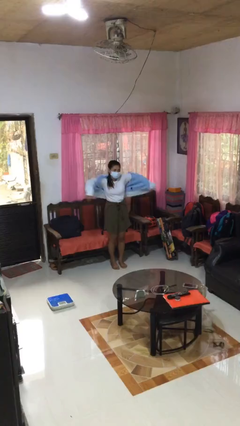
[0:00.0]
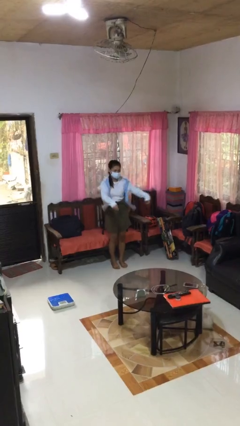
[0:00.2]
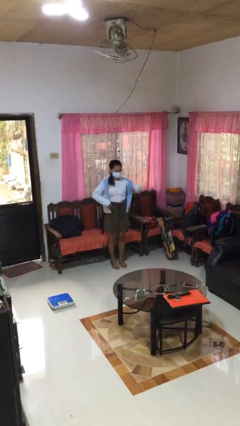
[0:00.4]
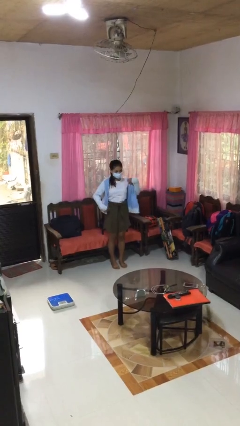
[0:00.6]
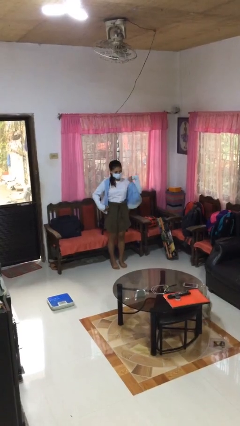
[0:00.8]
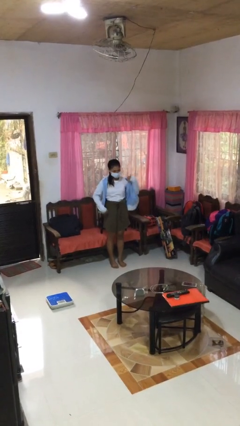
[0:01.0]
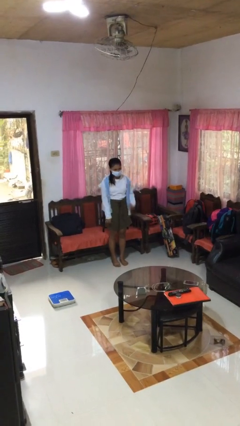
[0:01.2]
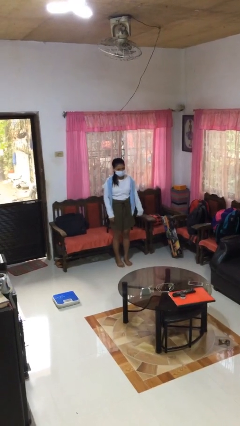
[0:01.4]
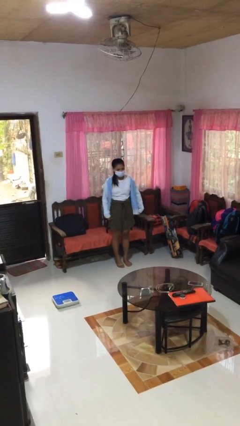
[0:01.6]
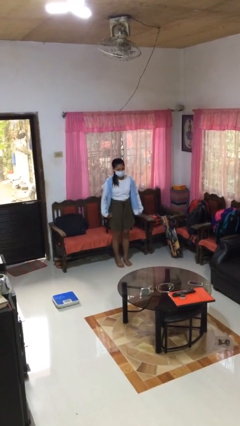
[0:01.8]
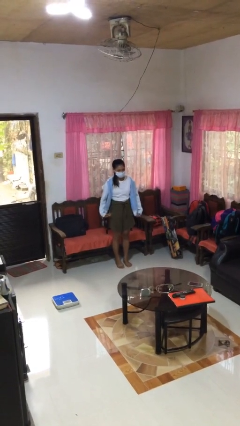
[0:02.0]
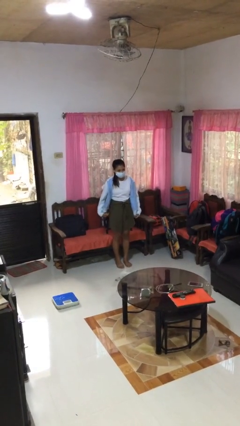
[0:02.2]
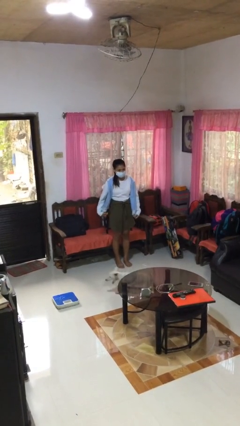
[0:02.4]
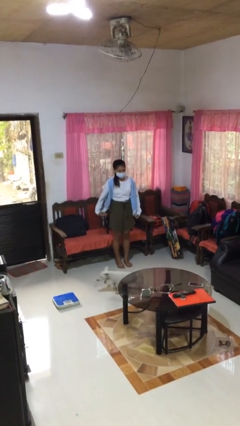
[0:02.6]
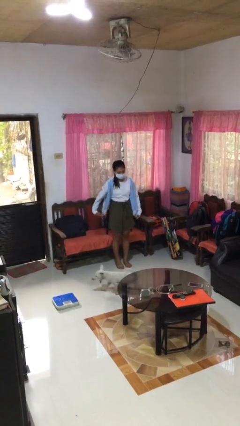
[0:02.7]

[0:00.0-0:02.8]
person puts on jacket

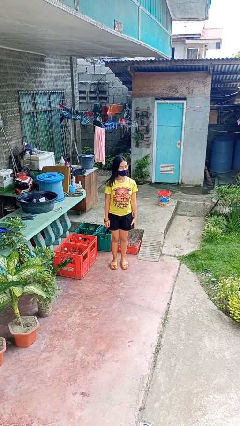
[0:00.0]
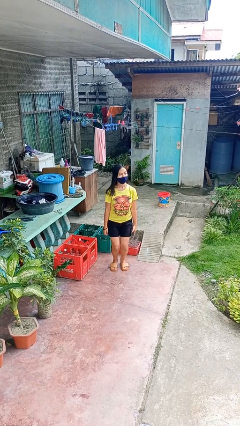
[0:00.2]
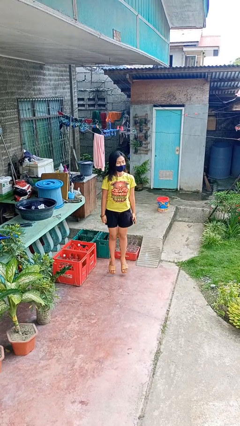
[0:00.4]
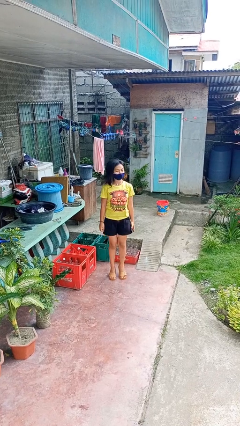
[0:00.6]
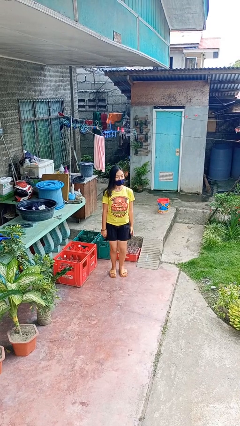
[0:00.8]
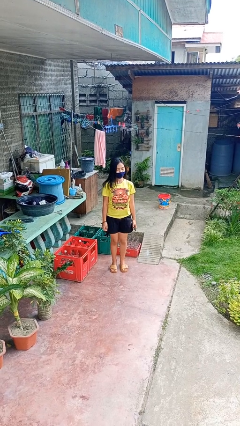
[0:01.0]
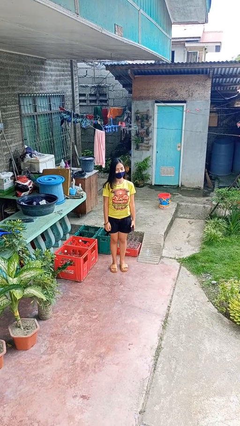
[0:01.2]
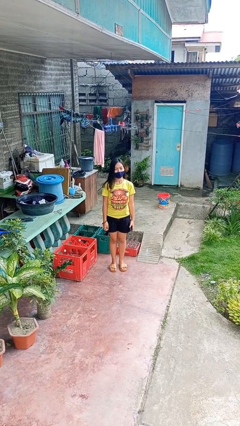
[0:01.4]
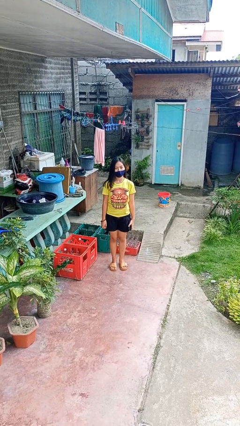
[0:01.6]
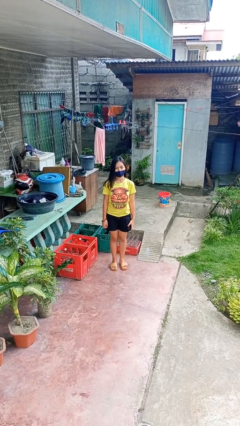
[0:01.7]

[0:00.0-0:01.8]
person jumps

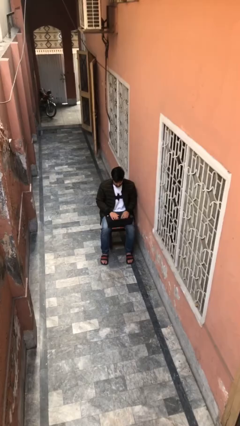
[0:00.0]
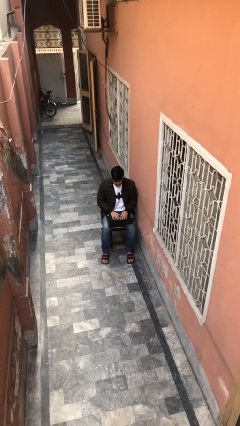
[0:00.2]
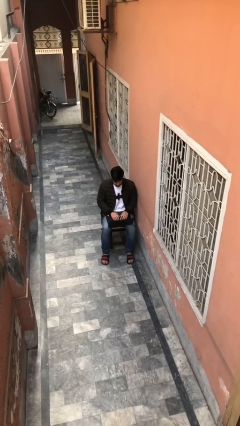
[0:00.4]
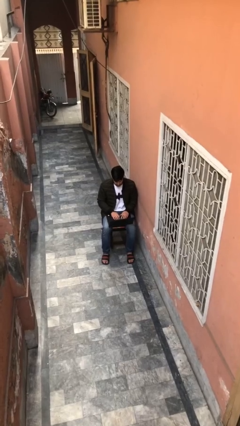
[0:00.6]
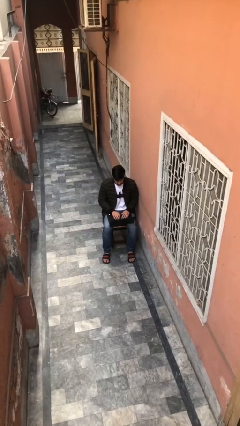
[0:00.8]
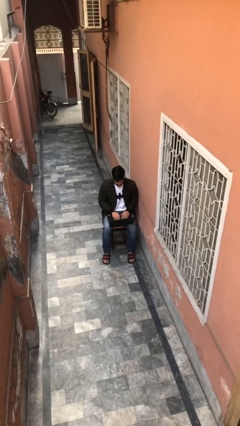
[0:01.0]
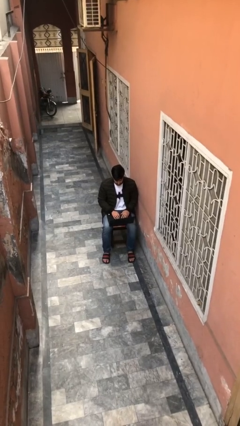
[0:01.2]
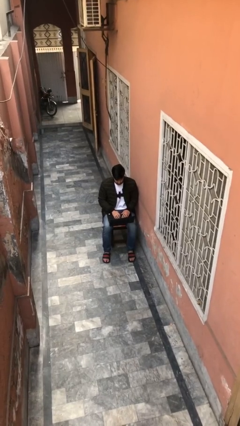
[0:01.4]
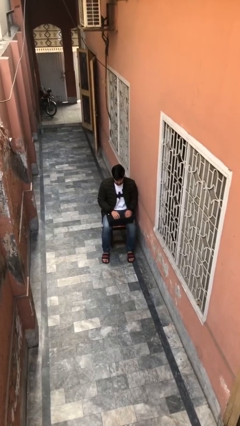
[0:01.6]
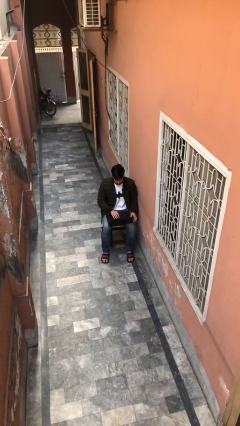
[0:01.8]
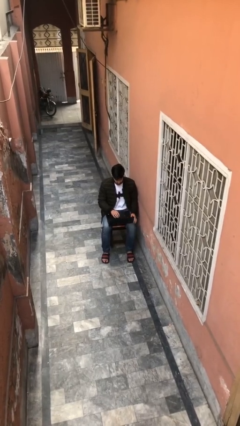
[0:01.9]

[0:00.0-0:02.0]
person interacts with laptop

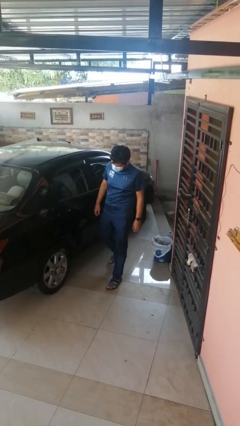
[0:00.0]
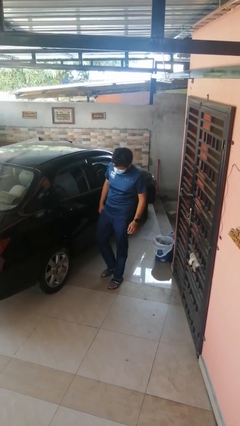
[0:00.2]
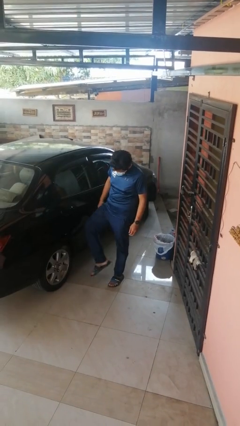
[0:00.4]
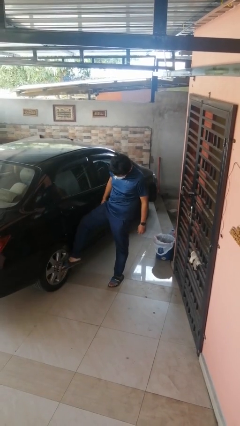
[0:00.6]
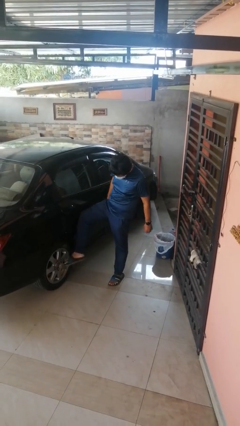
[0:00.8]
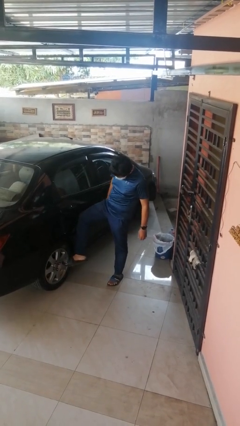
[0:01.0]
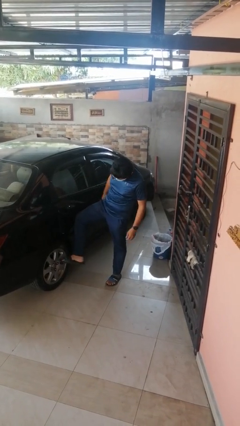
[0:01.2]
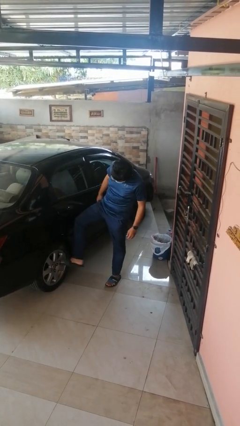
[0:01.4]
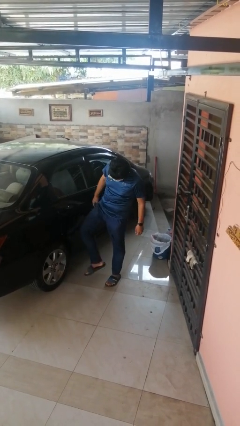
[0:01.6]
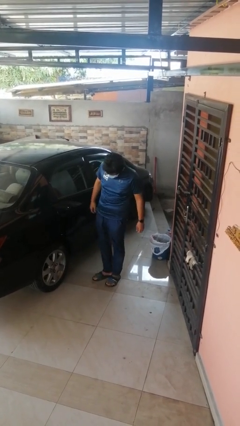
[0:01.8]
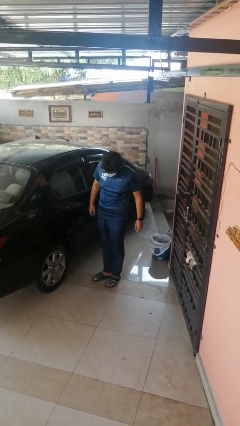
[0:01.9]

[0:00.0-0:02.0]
person kicks car tires

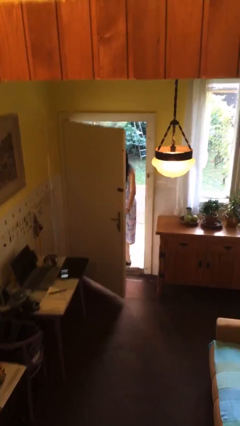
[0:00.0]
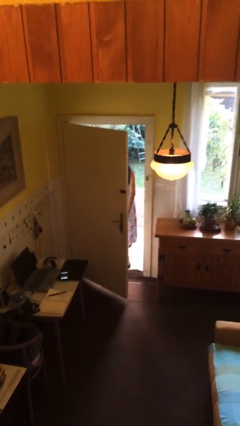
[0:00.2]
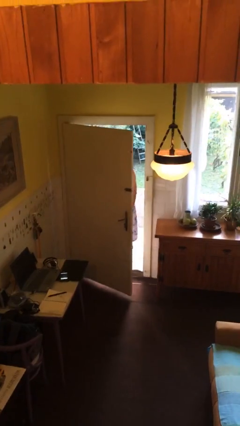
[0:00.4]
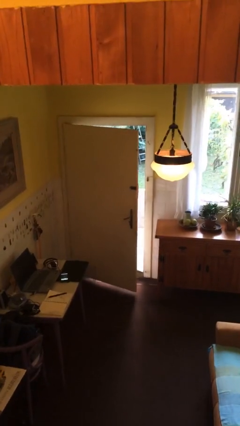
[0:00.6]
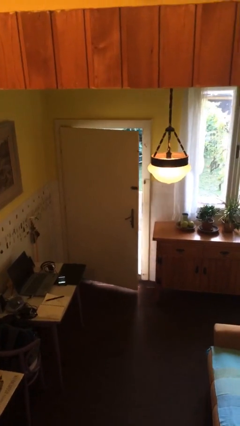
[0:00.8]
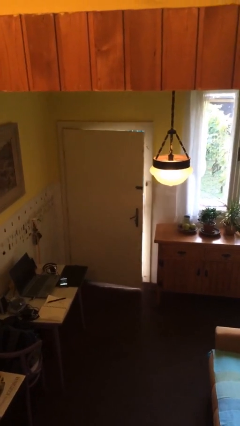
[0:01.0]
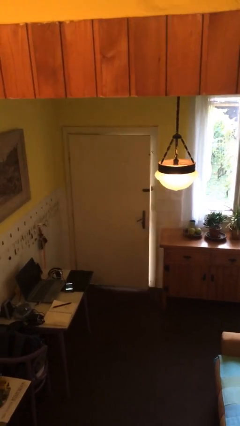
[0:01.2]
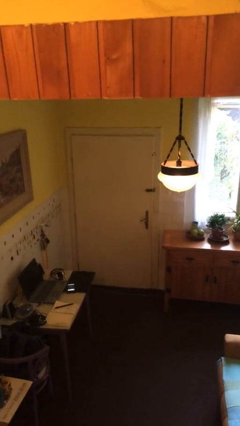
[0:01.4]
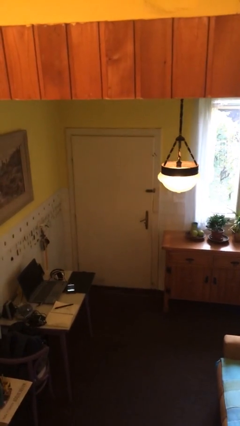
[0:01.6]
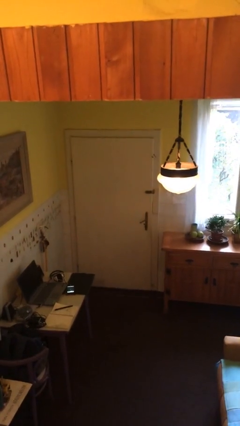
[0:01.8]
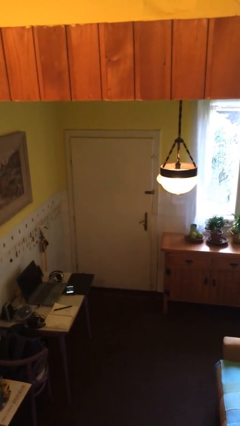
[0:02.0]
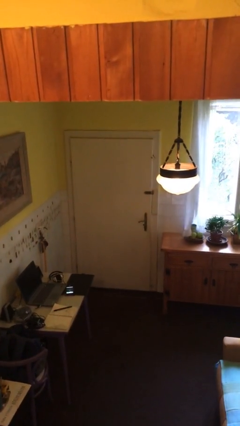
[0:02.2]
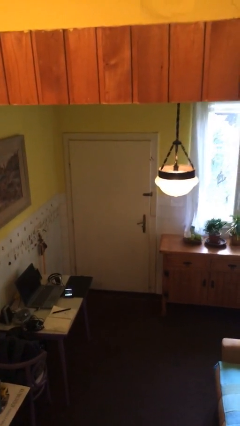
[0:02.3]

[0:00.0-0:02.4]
person closes facility door

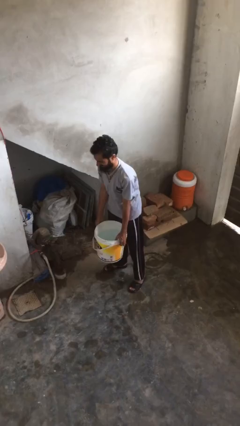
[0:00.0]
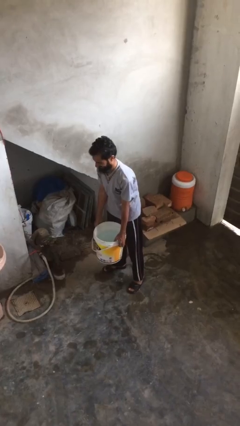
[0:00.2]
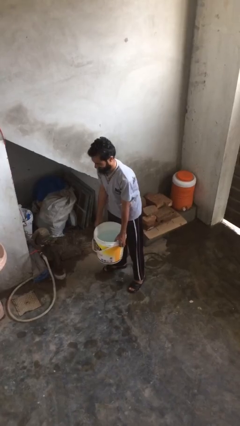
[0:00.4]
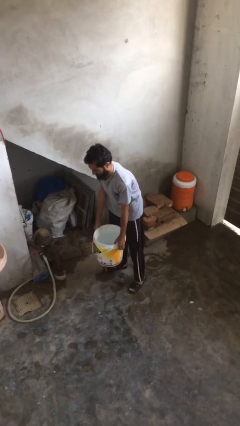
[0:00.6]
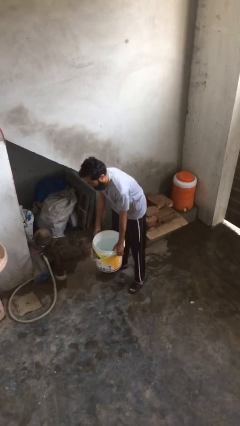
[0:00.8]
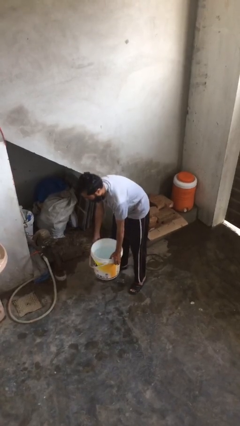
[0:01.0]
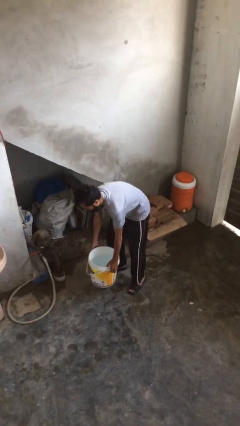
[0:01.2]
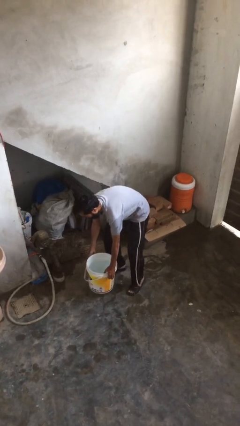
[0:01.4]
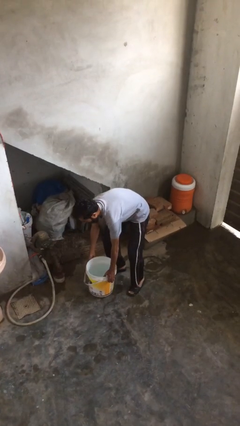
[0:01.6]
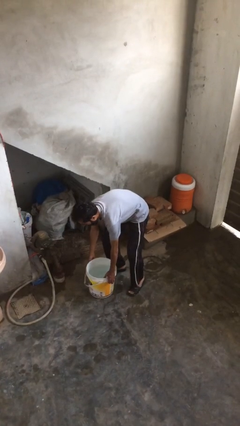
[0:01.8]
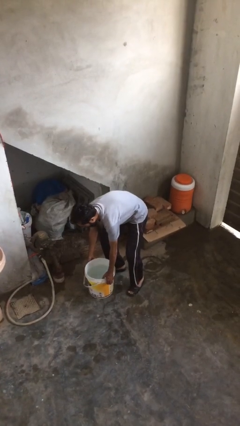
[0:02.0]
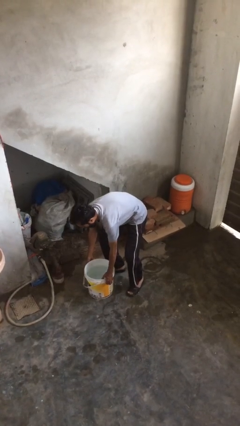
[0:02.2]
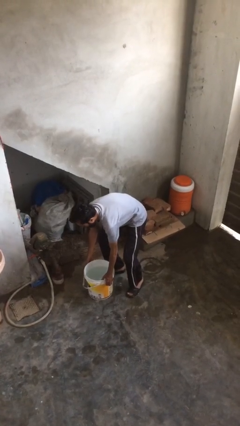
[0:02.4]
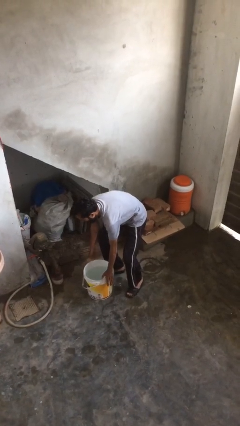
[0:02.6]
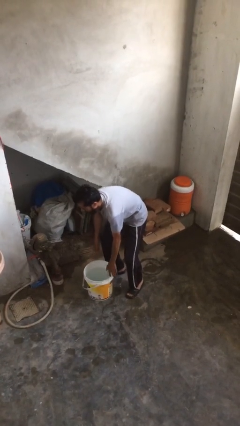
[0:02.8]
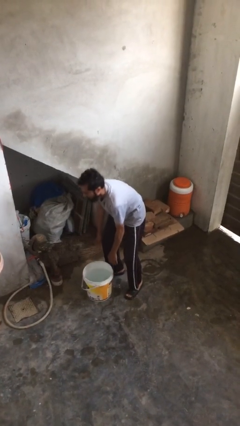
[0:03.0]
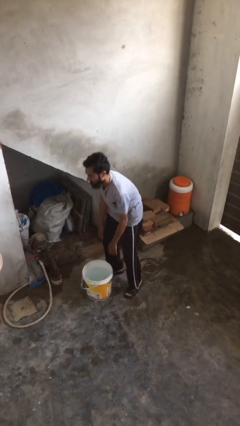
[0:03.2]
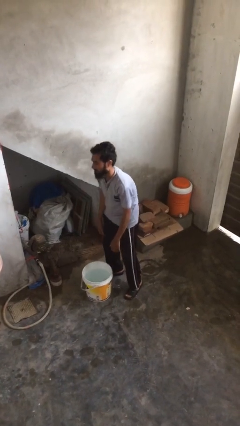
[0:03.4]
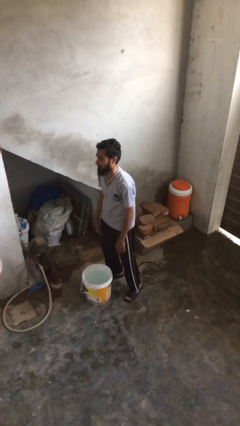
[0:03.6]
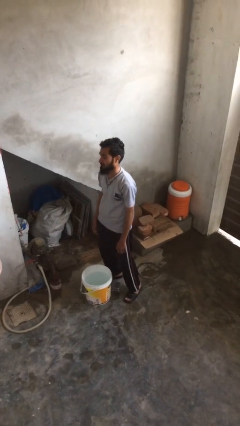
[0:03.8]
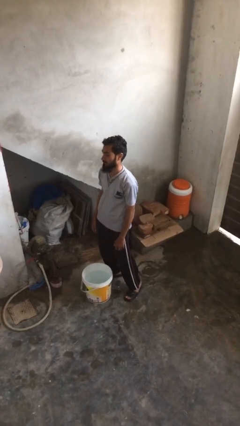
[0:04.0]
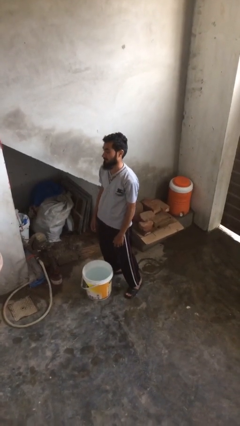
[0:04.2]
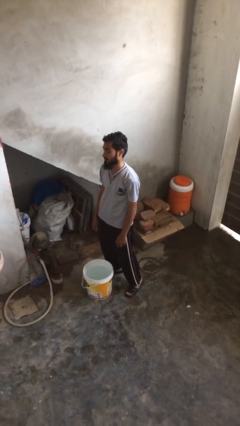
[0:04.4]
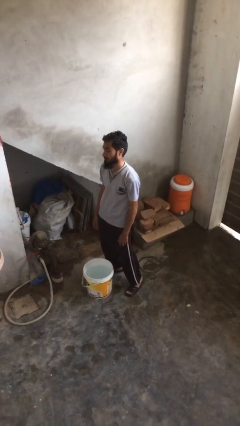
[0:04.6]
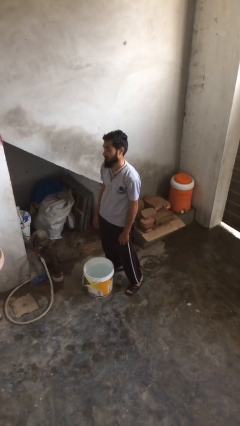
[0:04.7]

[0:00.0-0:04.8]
person puts down object on floor

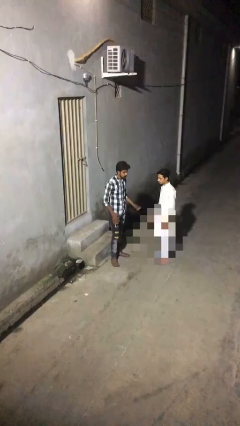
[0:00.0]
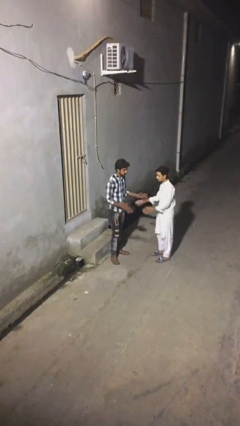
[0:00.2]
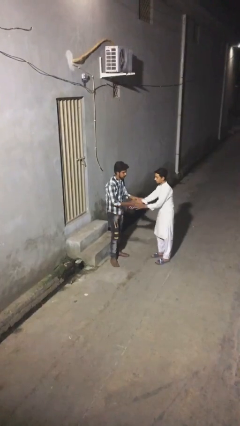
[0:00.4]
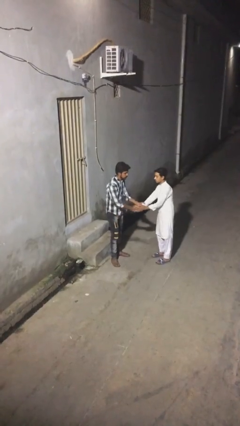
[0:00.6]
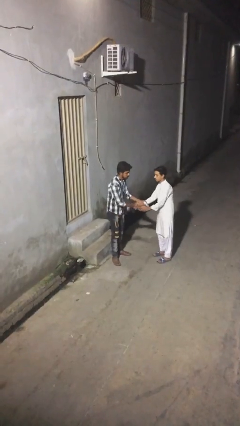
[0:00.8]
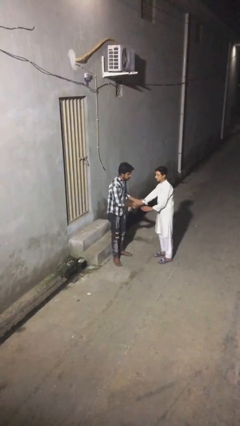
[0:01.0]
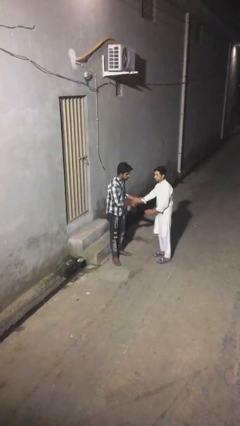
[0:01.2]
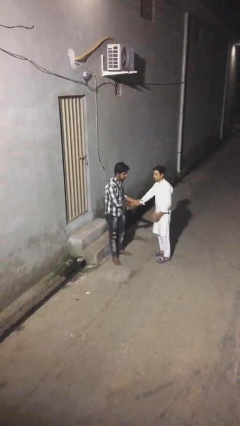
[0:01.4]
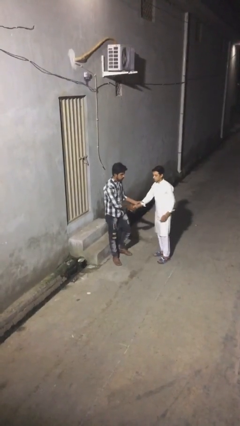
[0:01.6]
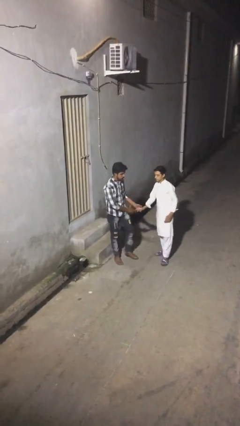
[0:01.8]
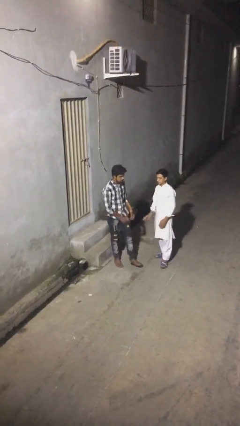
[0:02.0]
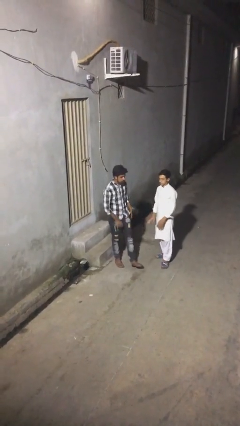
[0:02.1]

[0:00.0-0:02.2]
person shakes hand
